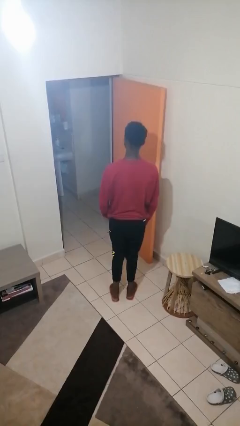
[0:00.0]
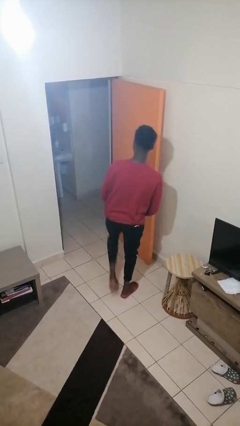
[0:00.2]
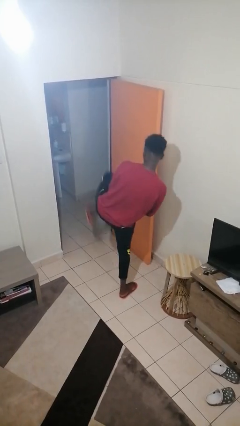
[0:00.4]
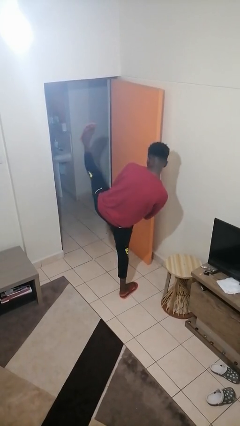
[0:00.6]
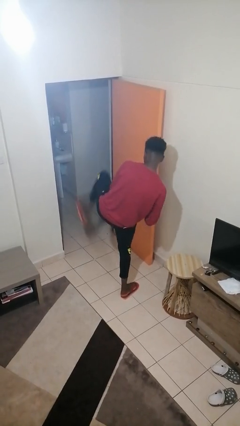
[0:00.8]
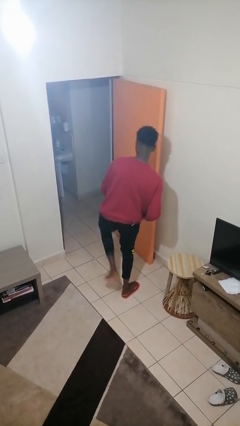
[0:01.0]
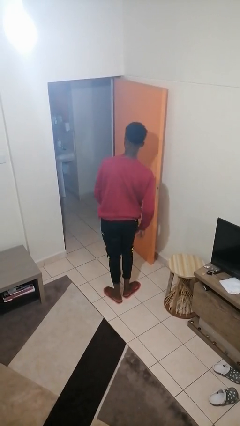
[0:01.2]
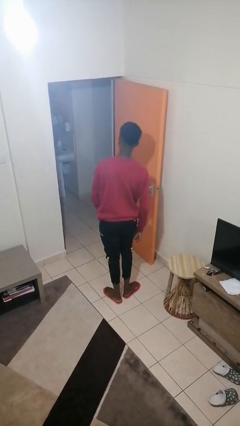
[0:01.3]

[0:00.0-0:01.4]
person karate kicks

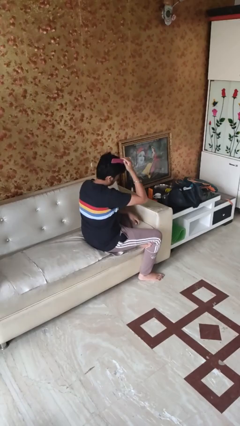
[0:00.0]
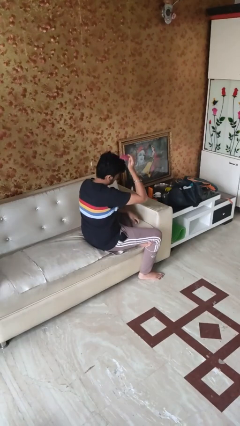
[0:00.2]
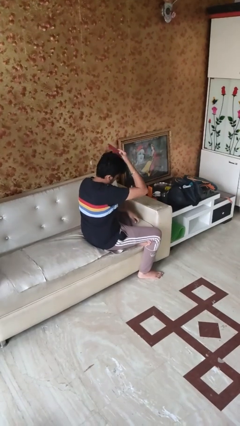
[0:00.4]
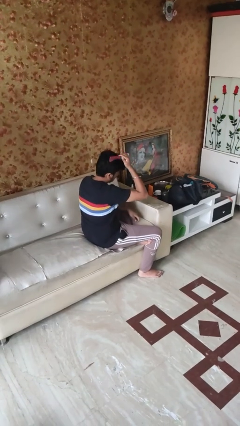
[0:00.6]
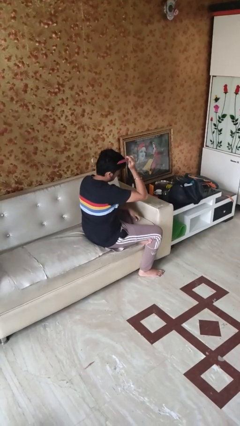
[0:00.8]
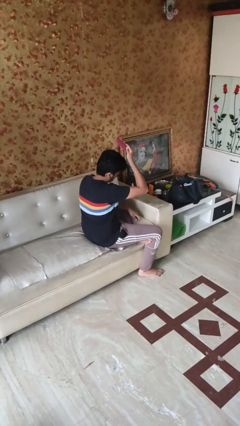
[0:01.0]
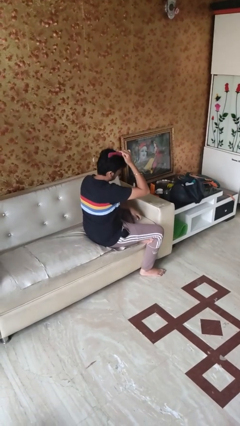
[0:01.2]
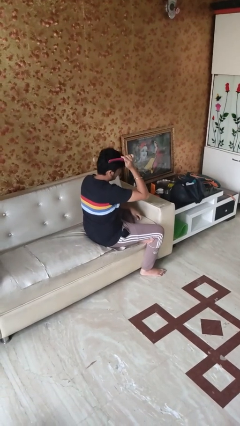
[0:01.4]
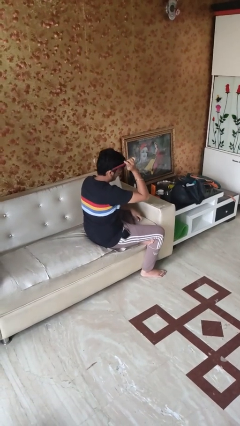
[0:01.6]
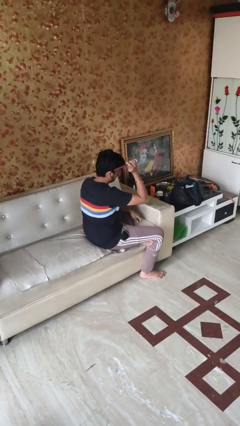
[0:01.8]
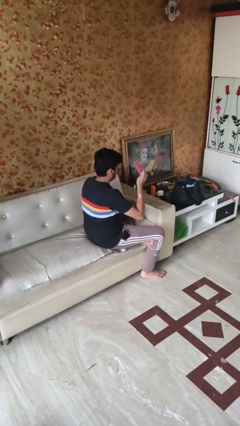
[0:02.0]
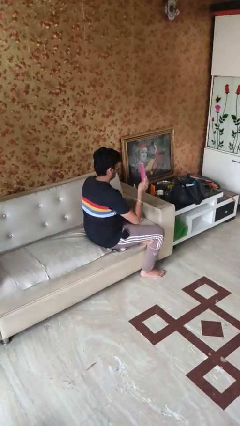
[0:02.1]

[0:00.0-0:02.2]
person brushes hair

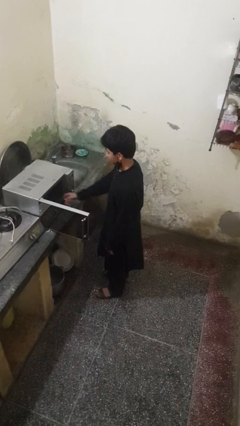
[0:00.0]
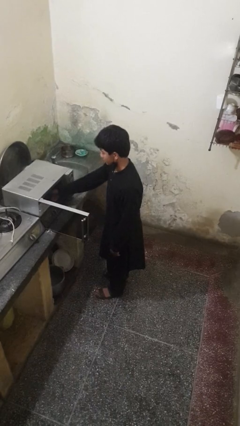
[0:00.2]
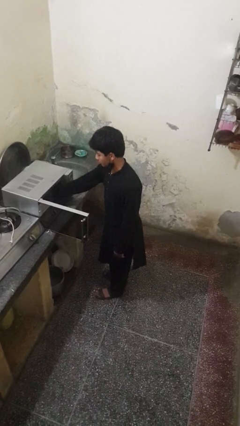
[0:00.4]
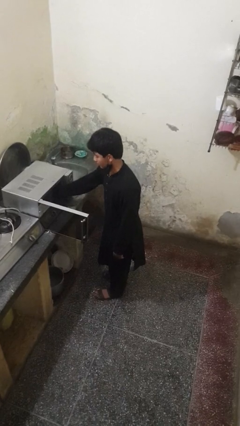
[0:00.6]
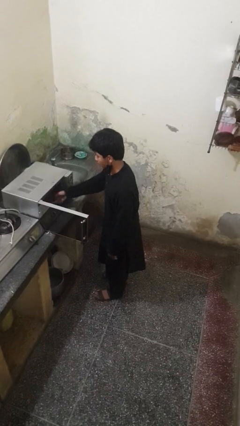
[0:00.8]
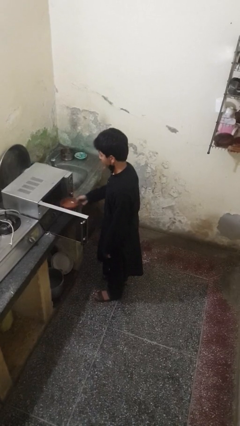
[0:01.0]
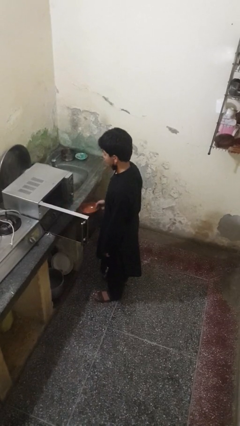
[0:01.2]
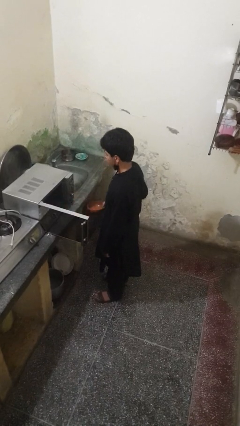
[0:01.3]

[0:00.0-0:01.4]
person takes object from microwave

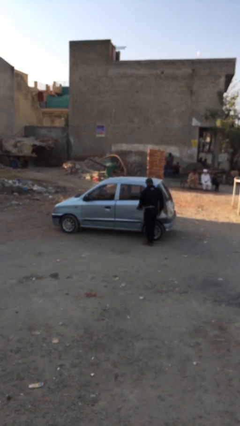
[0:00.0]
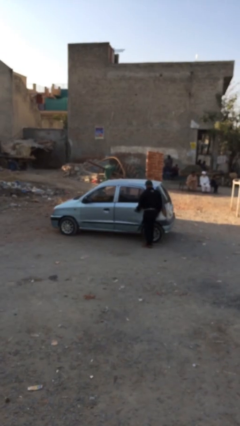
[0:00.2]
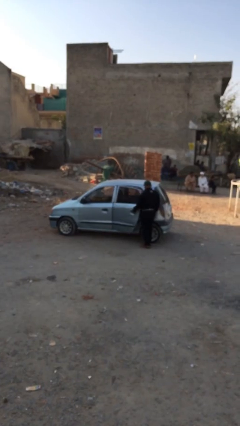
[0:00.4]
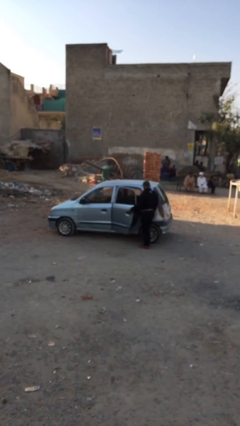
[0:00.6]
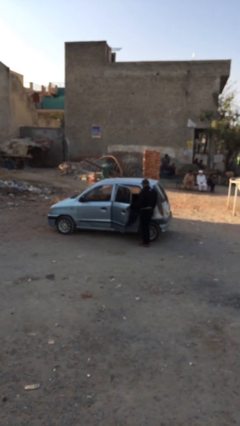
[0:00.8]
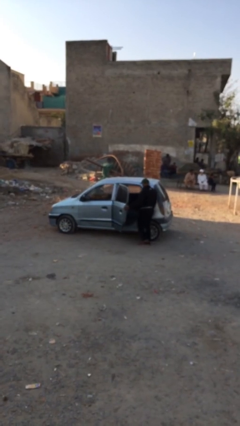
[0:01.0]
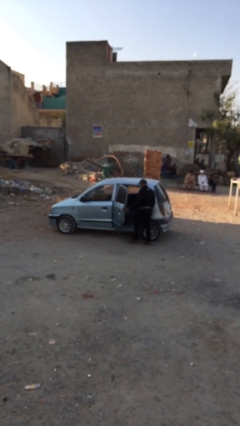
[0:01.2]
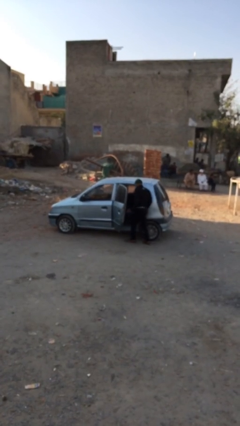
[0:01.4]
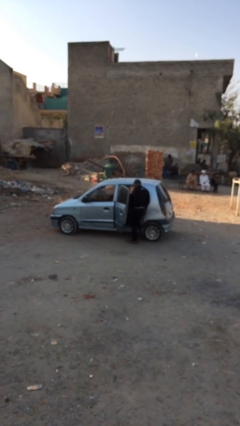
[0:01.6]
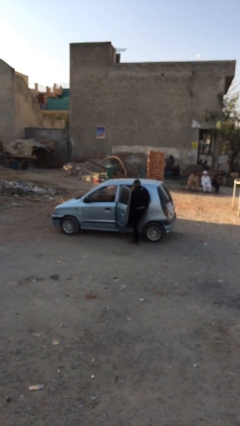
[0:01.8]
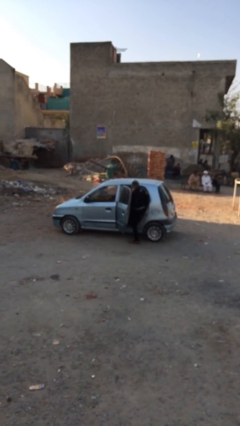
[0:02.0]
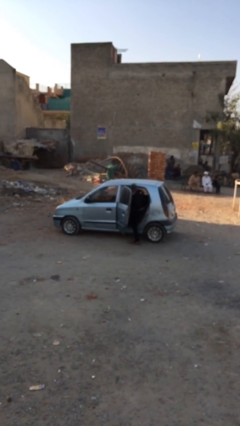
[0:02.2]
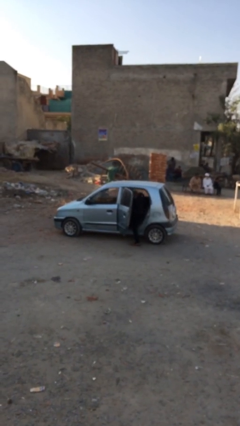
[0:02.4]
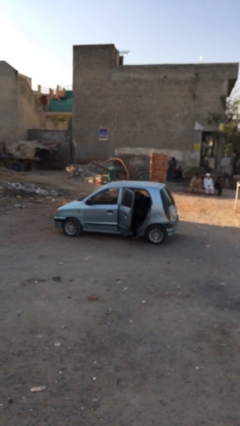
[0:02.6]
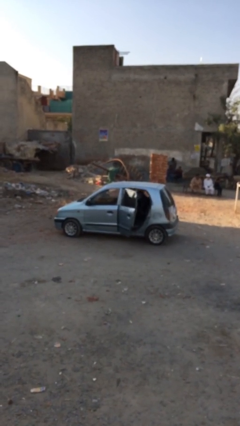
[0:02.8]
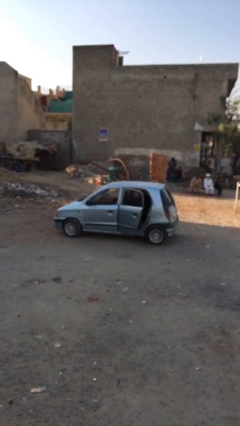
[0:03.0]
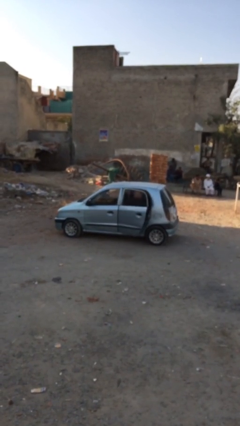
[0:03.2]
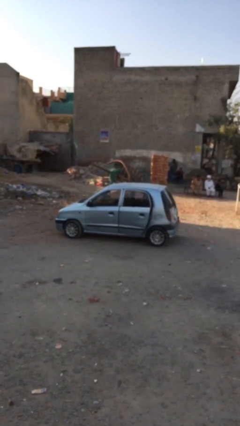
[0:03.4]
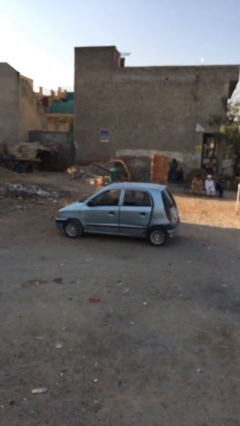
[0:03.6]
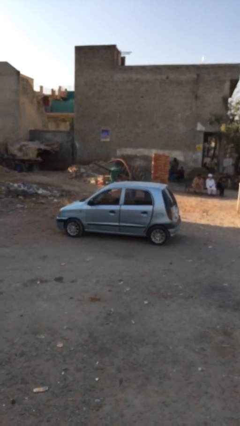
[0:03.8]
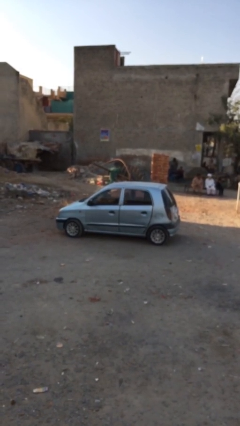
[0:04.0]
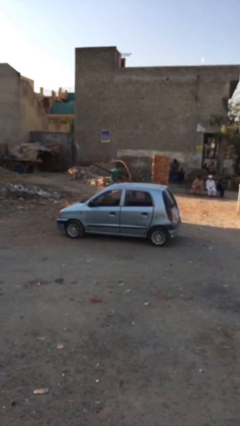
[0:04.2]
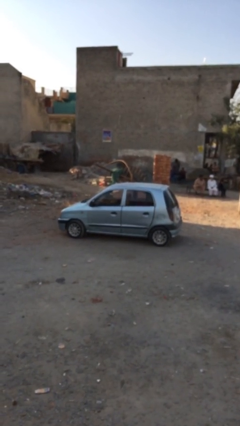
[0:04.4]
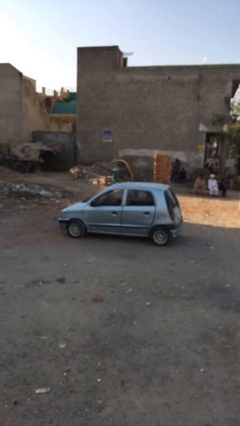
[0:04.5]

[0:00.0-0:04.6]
car picks up person

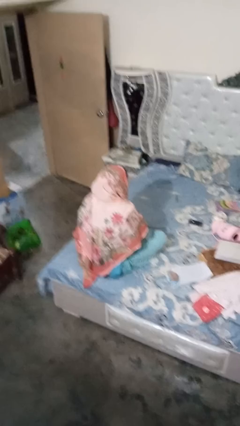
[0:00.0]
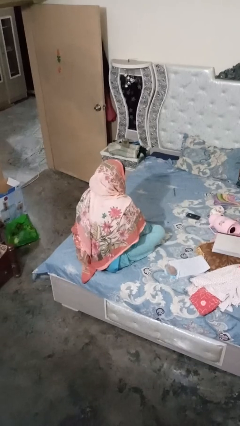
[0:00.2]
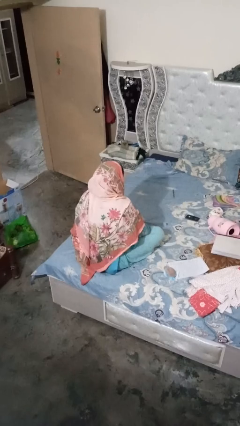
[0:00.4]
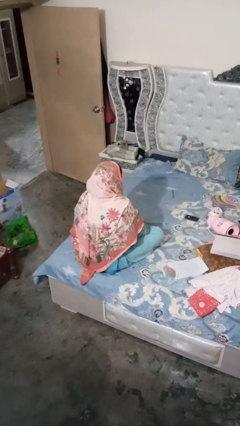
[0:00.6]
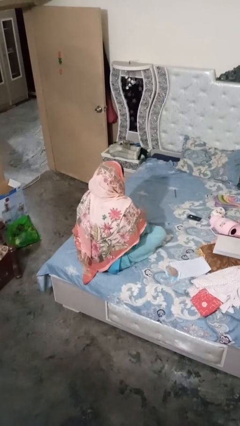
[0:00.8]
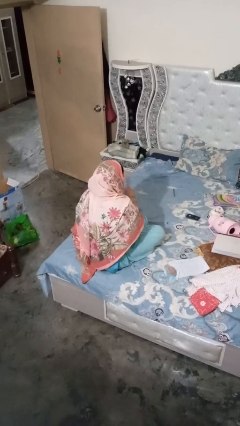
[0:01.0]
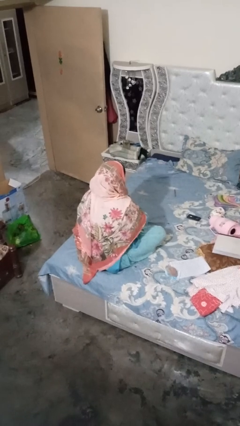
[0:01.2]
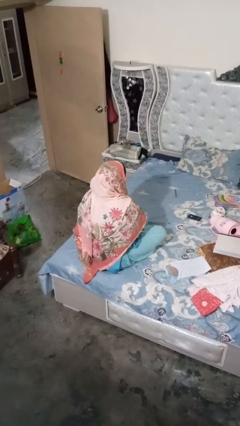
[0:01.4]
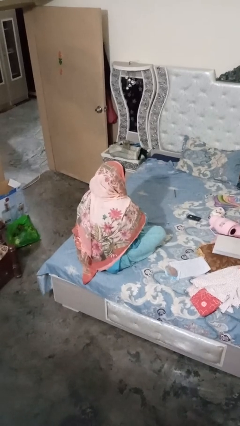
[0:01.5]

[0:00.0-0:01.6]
person gestures be quiet

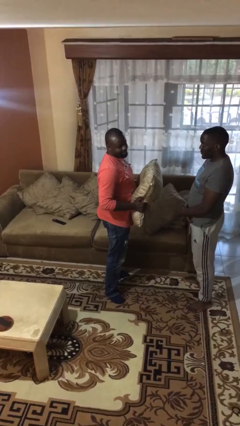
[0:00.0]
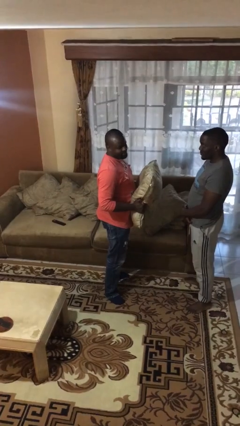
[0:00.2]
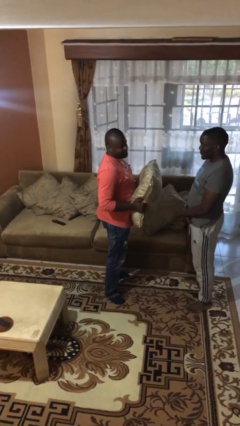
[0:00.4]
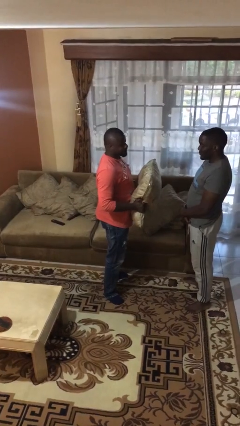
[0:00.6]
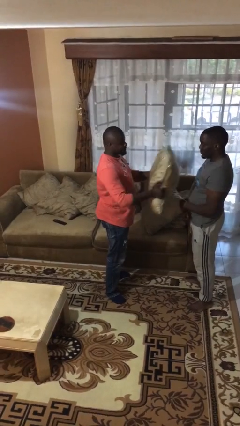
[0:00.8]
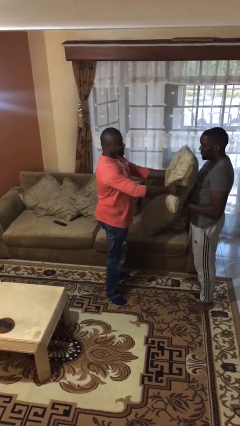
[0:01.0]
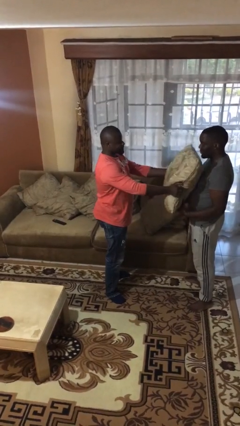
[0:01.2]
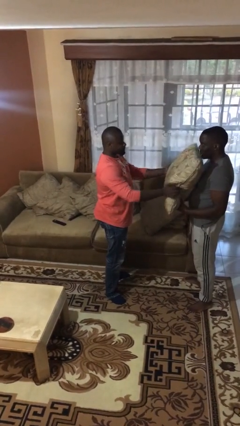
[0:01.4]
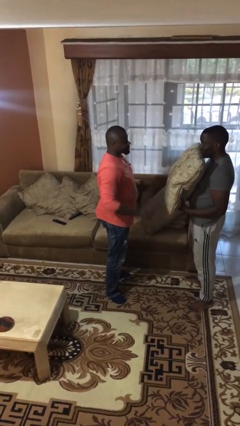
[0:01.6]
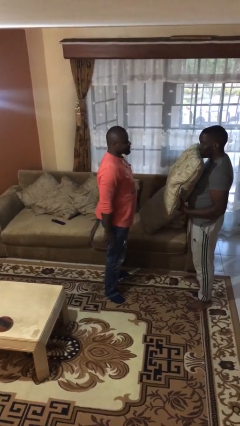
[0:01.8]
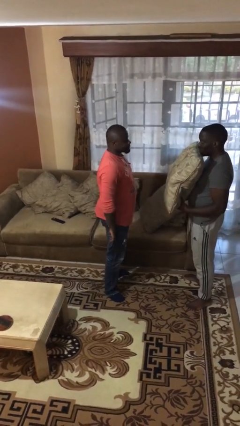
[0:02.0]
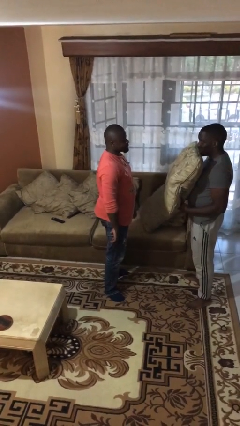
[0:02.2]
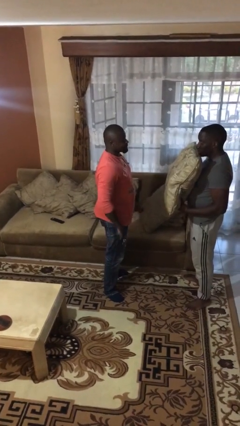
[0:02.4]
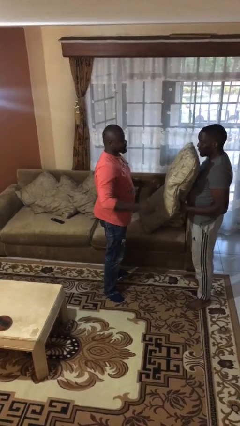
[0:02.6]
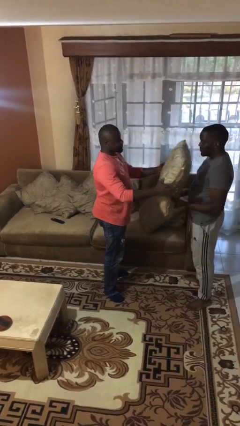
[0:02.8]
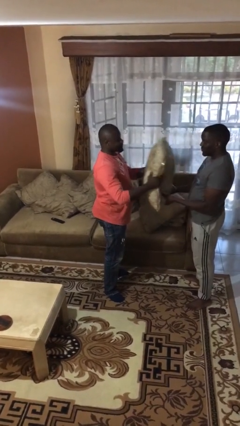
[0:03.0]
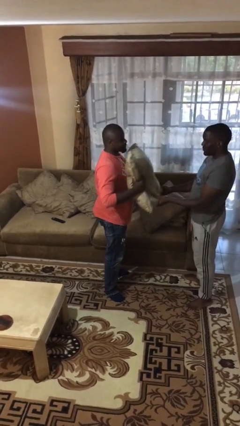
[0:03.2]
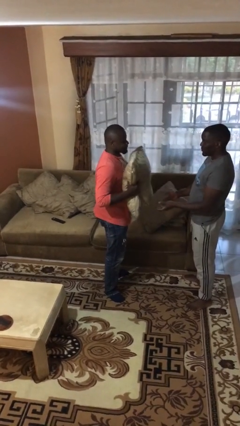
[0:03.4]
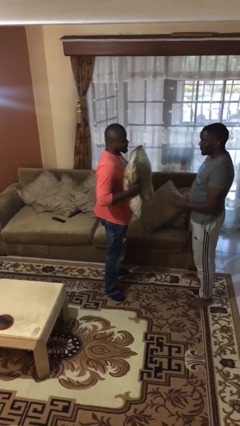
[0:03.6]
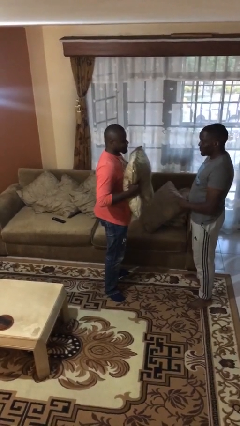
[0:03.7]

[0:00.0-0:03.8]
person transfers object to person

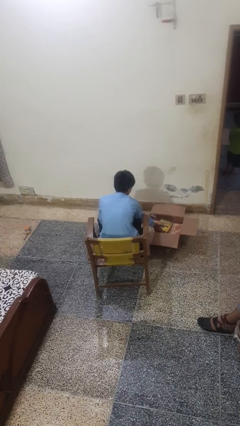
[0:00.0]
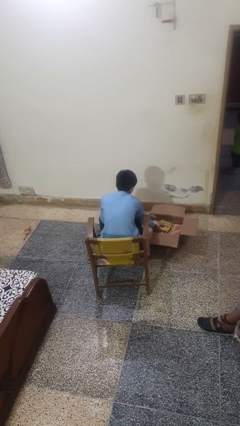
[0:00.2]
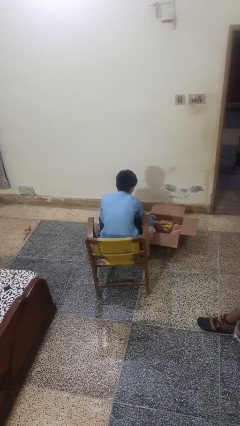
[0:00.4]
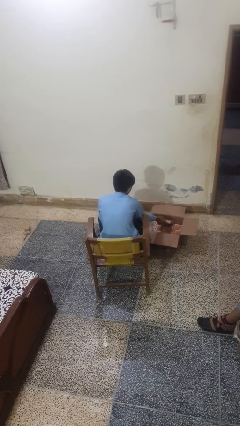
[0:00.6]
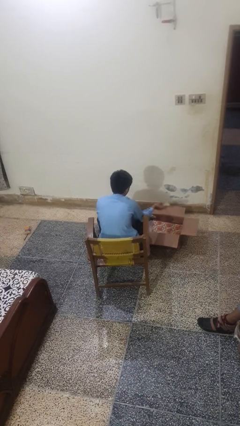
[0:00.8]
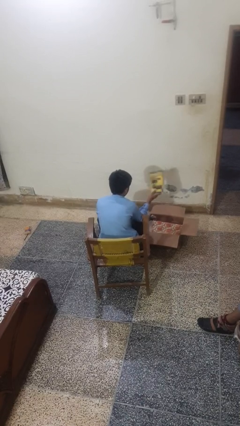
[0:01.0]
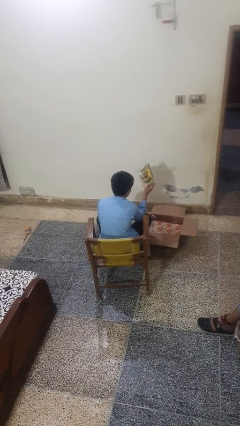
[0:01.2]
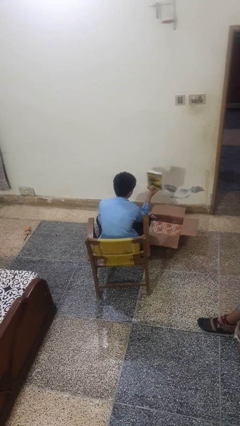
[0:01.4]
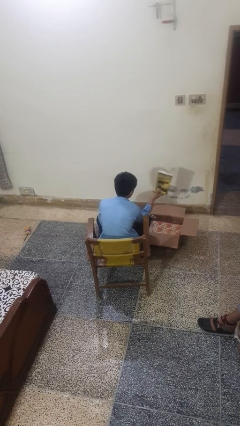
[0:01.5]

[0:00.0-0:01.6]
person takes object from box

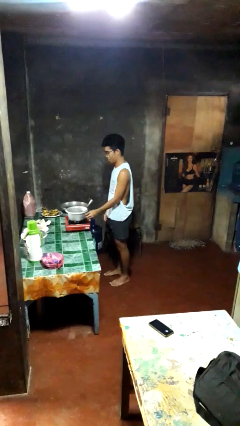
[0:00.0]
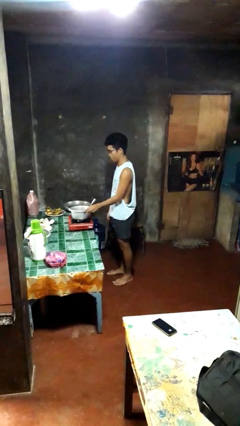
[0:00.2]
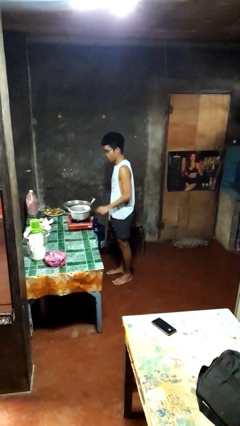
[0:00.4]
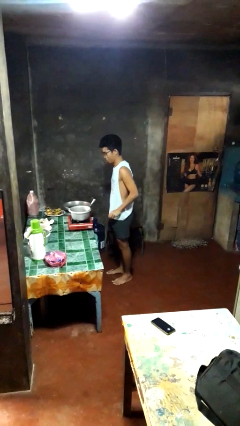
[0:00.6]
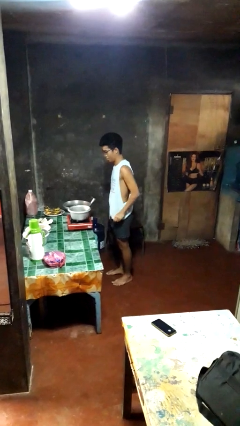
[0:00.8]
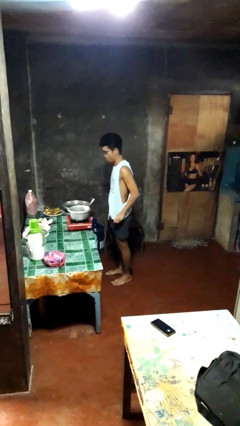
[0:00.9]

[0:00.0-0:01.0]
person burns hand
